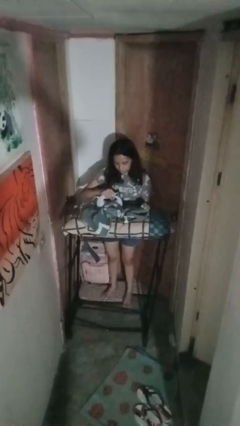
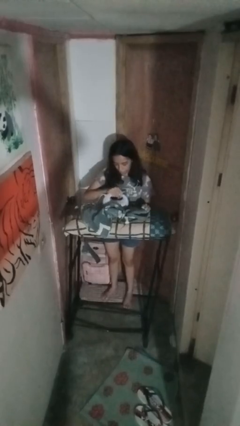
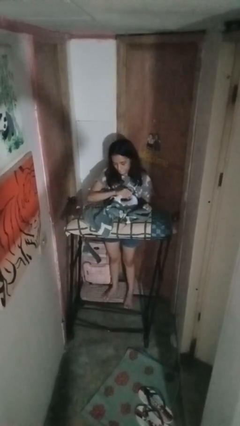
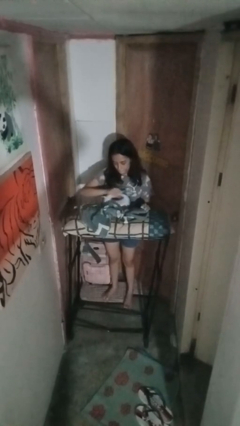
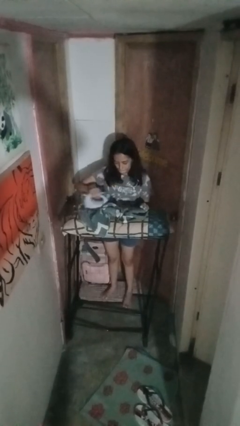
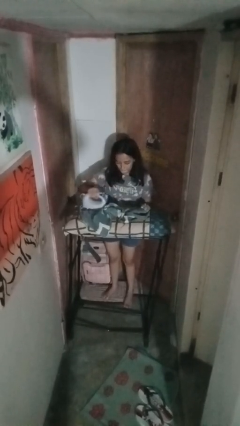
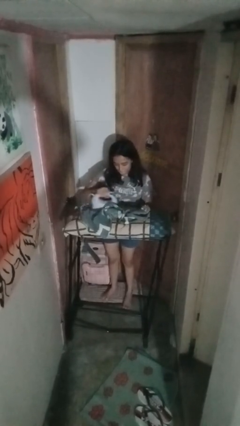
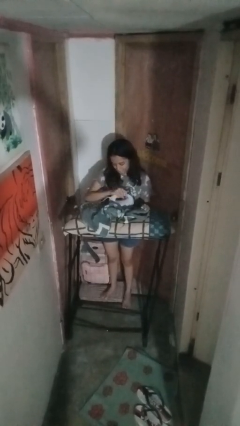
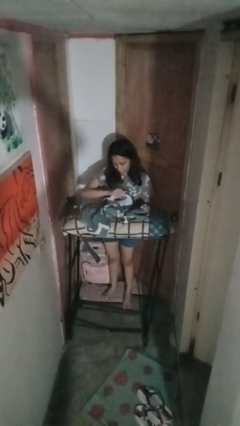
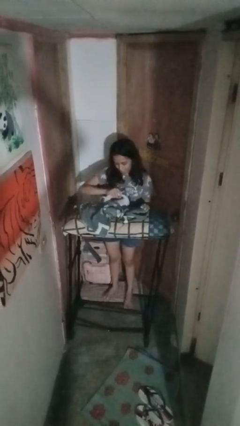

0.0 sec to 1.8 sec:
person irons clothes

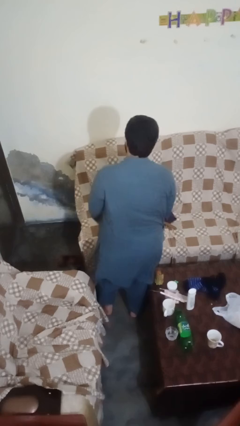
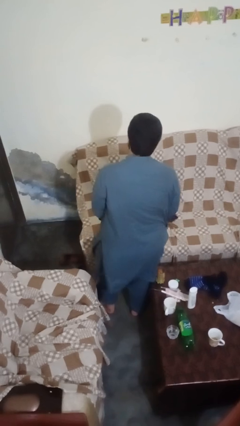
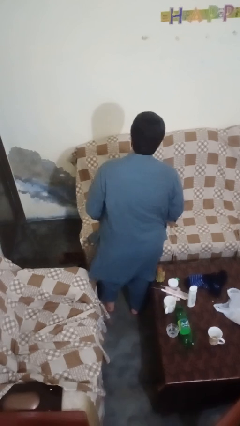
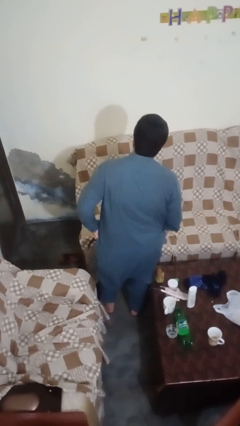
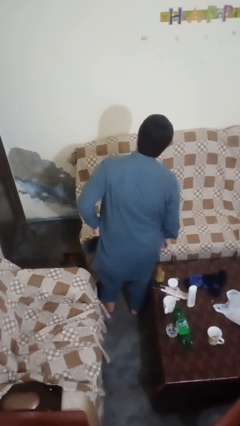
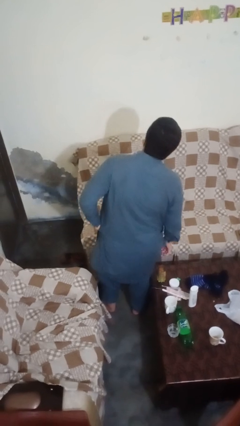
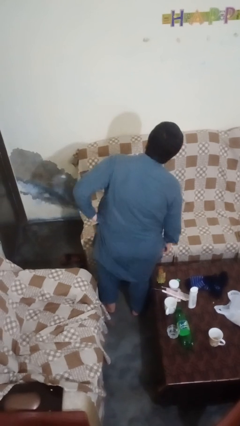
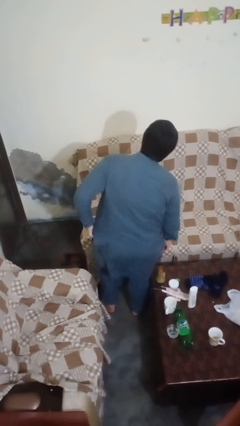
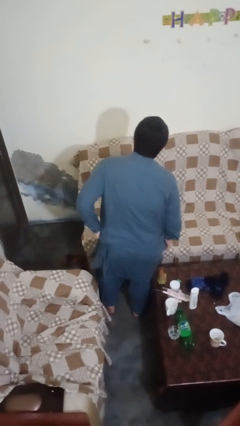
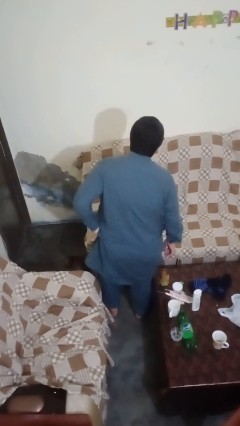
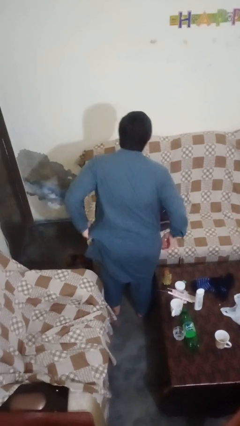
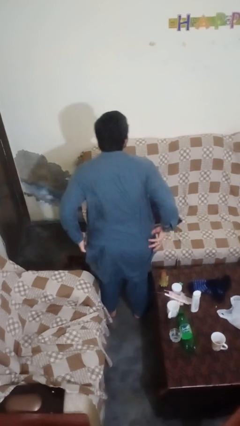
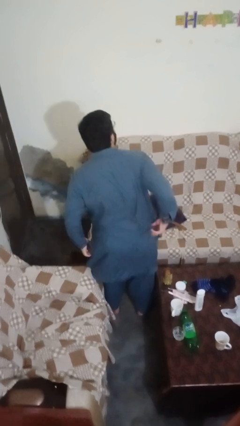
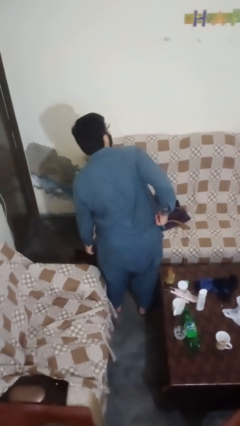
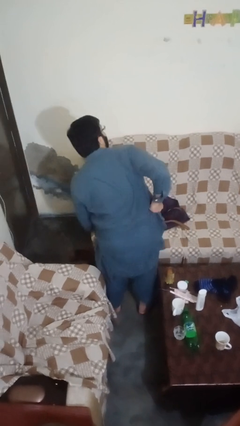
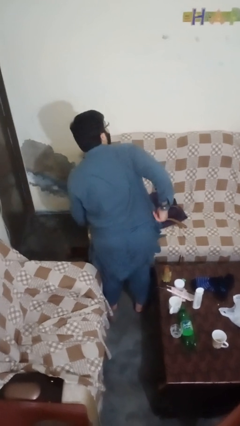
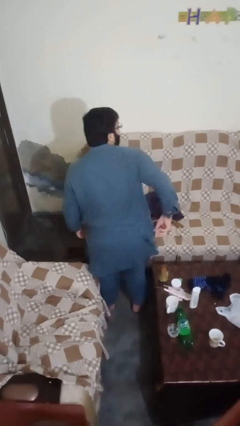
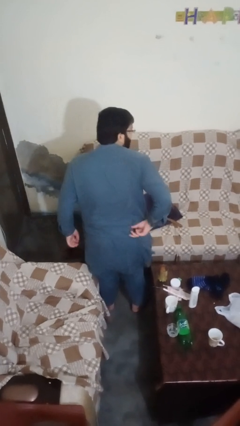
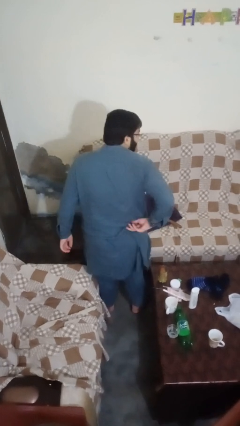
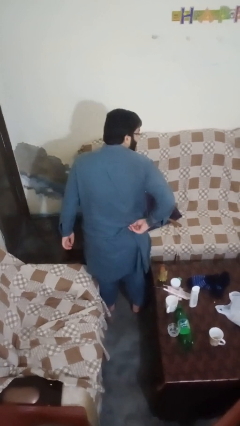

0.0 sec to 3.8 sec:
person hikes up pants

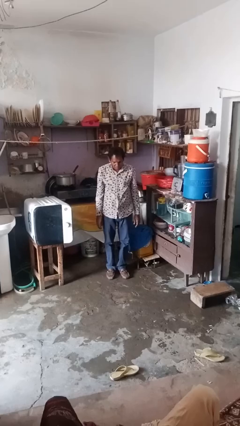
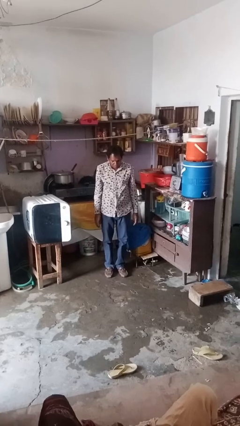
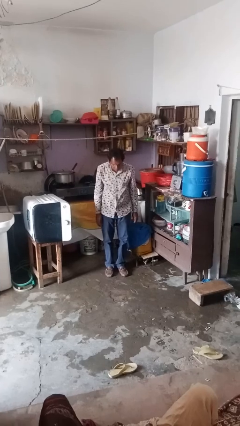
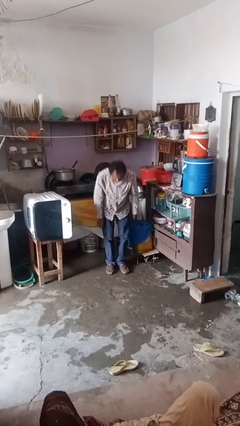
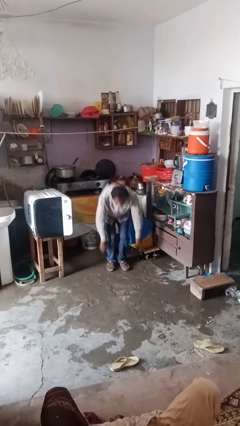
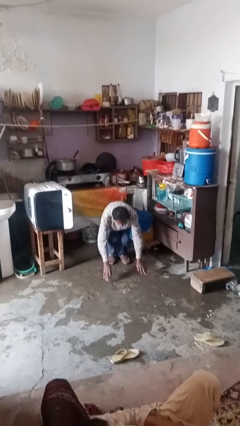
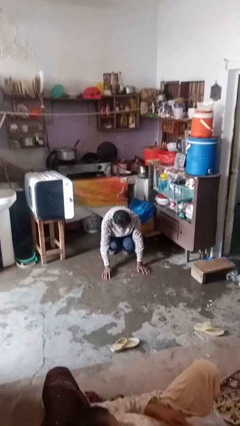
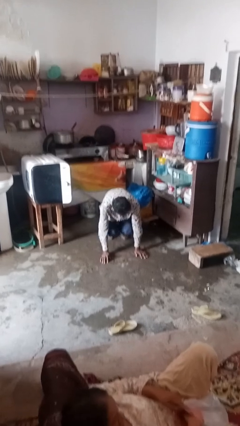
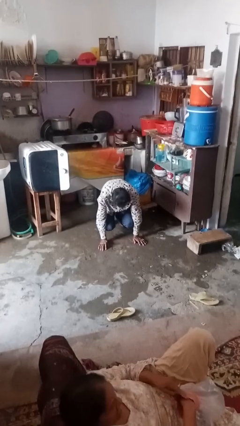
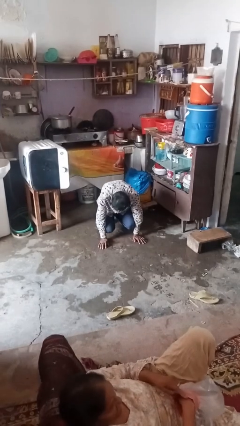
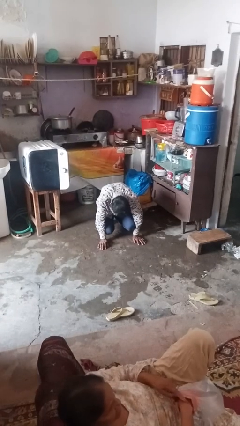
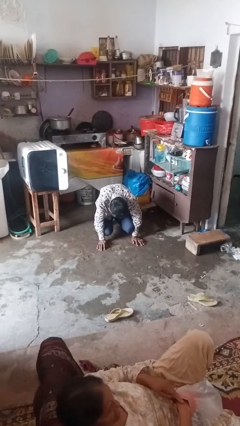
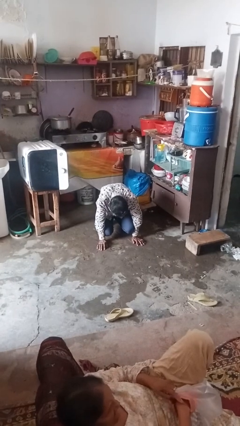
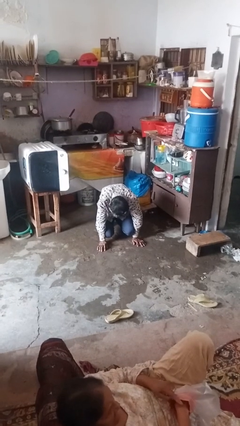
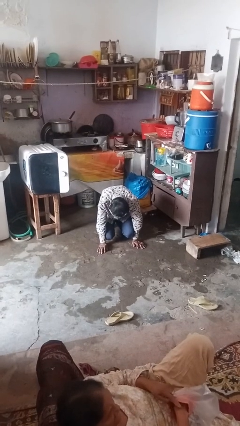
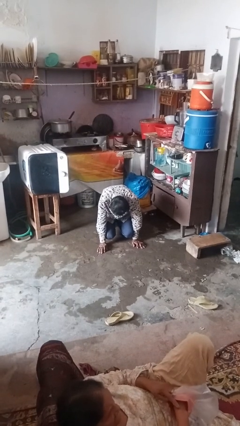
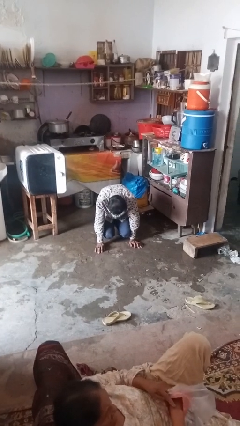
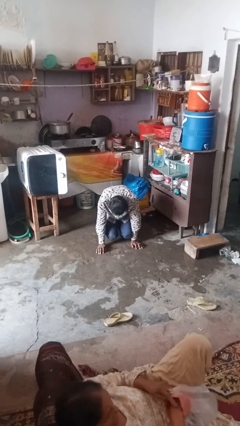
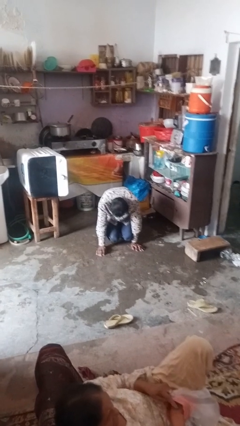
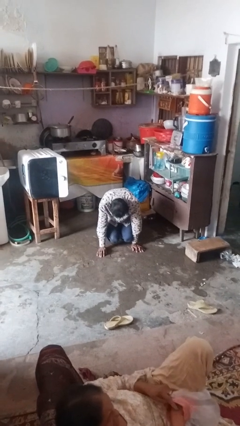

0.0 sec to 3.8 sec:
person falls while standing

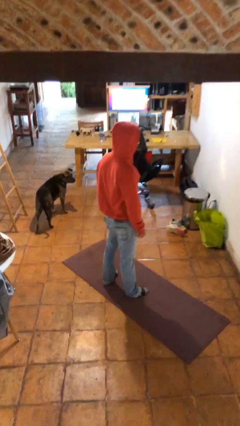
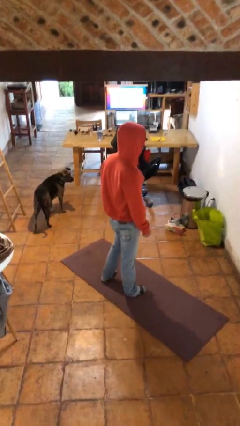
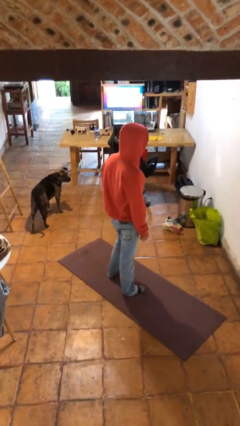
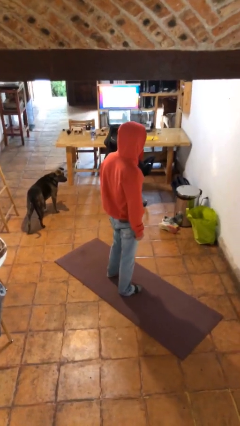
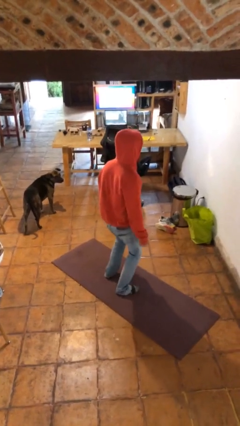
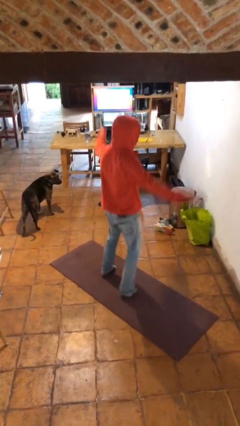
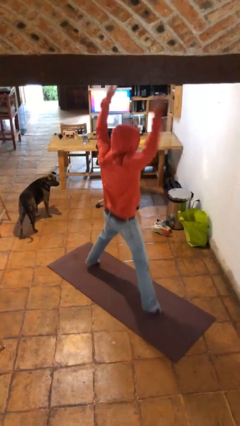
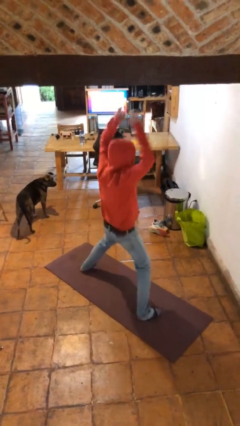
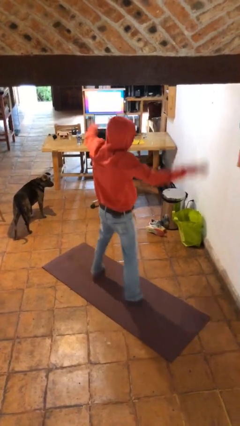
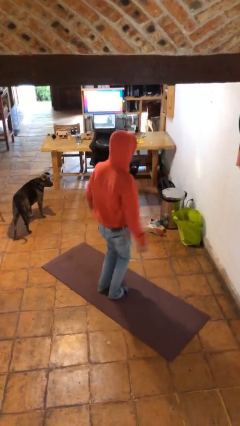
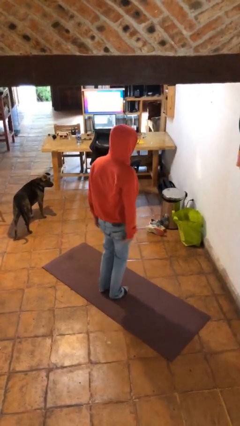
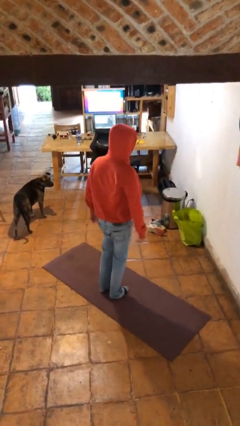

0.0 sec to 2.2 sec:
person exercises with jumping jacks

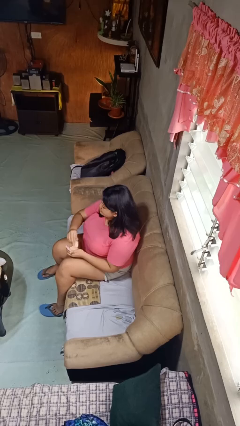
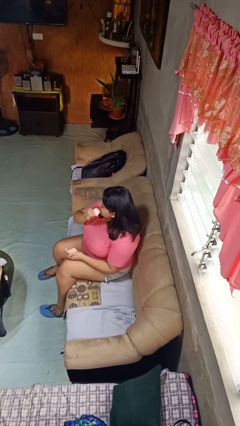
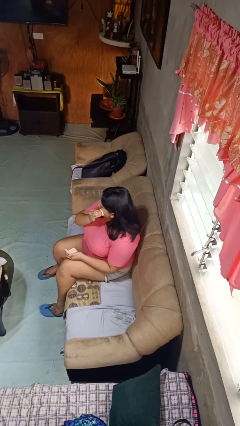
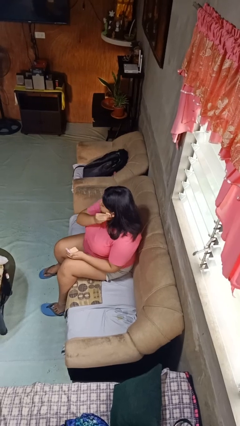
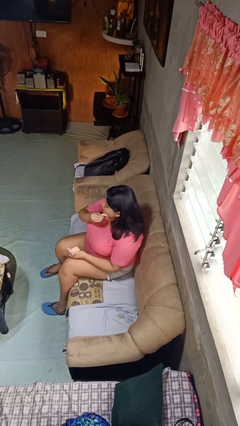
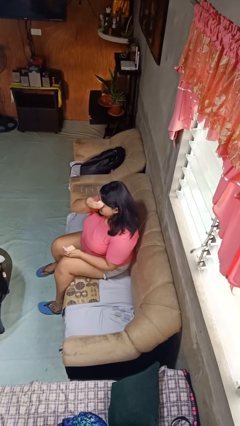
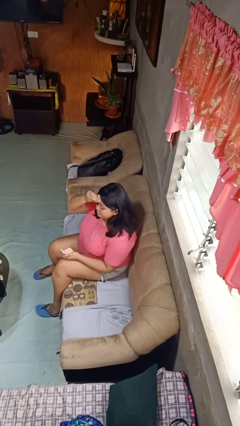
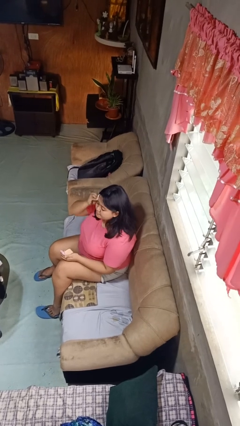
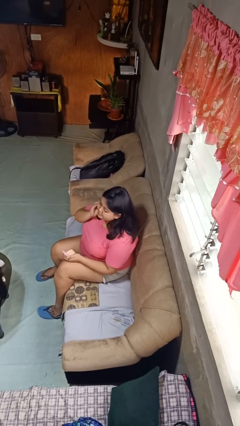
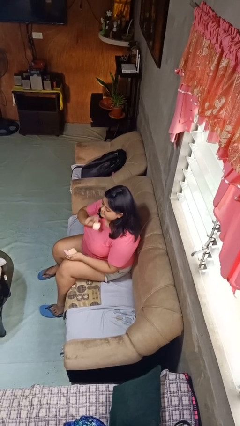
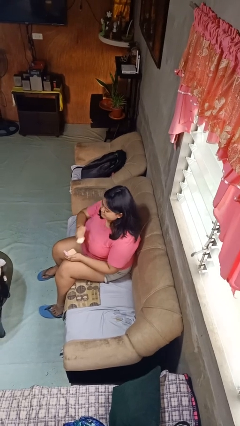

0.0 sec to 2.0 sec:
person applies foundation makeup

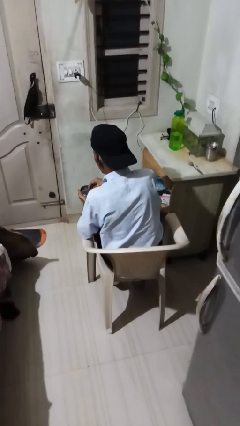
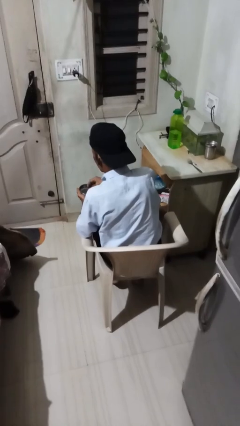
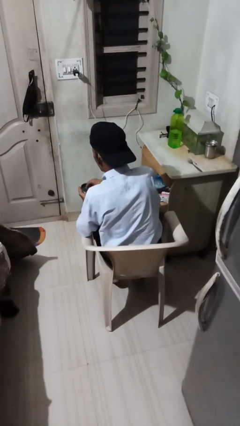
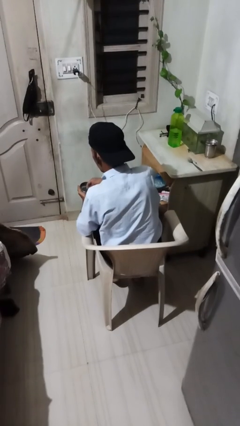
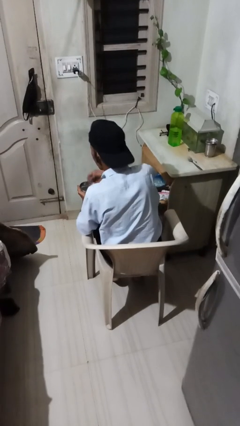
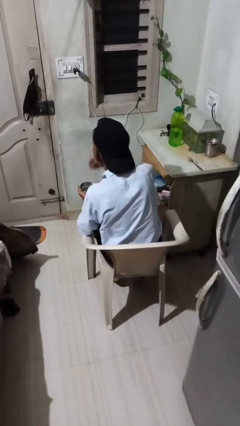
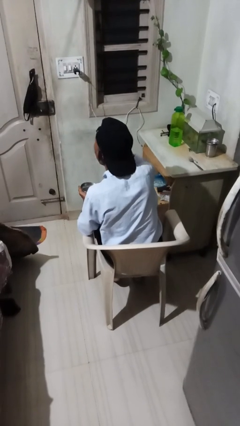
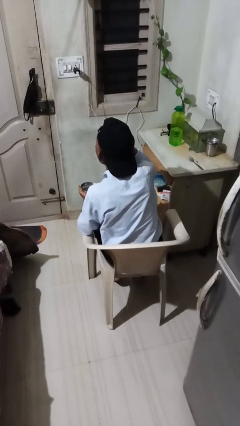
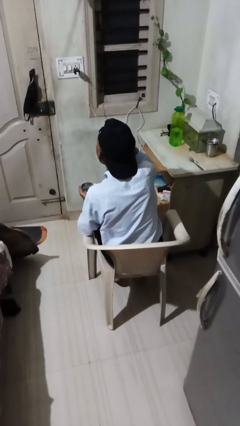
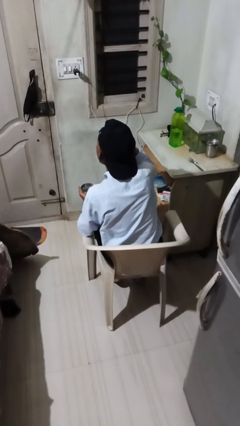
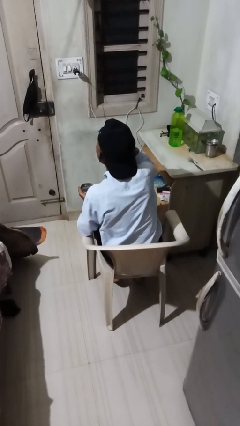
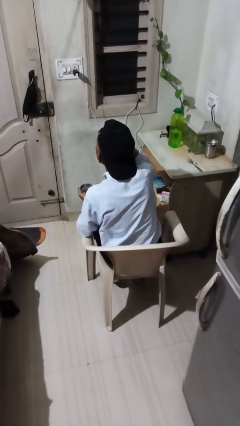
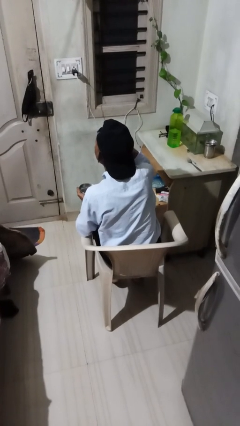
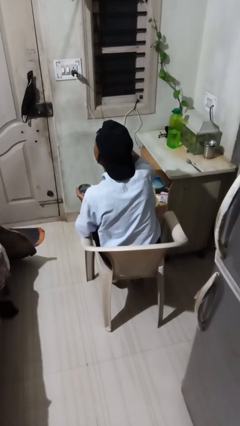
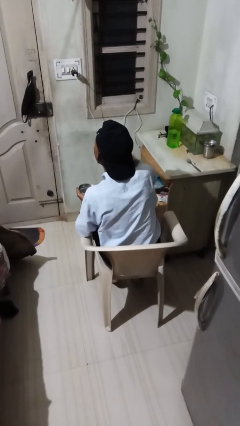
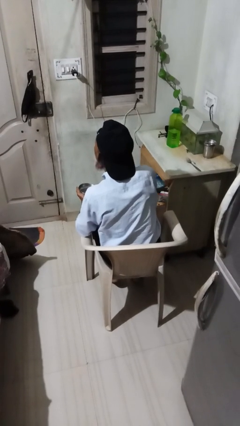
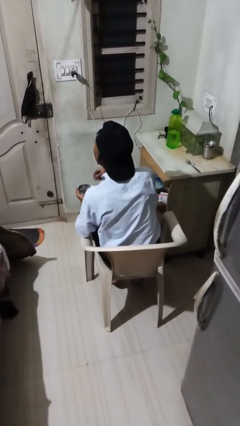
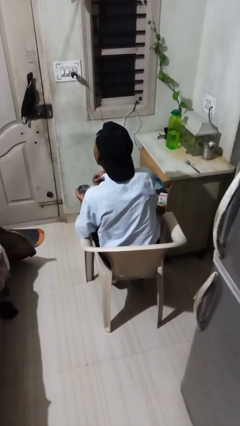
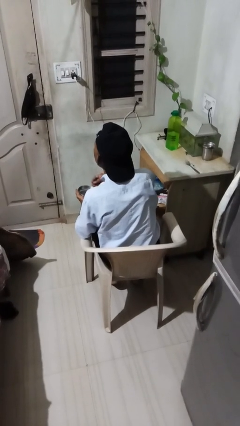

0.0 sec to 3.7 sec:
person eats with hands

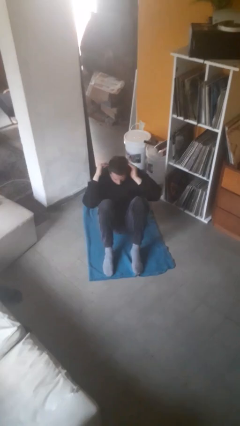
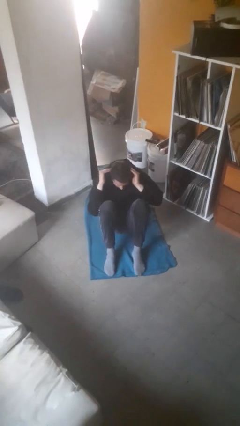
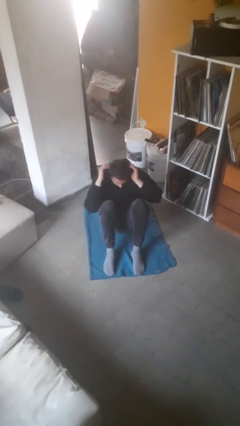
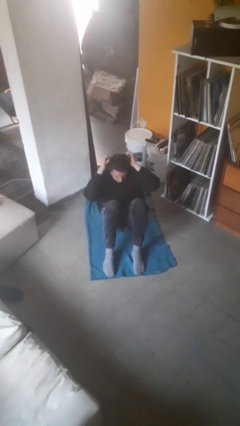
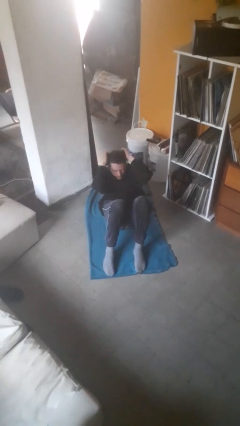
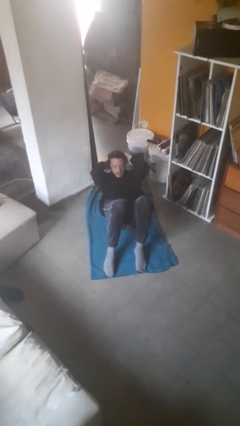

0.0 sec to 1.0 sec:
person exercises with situp
